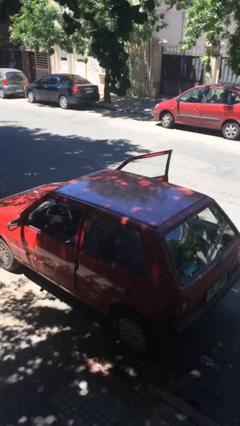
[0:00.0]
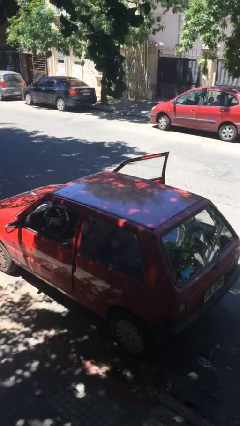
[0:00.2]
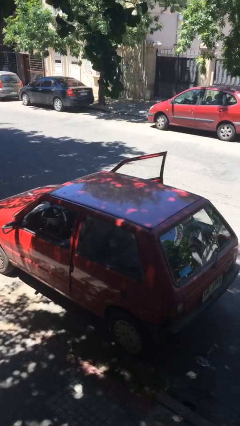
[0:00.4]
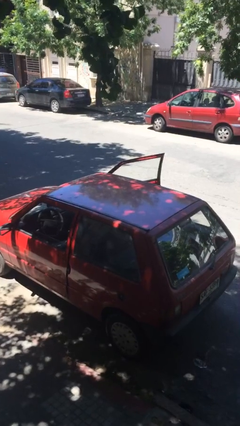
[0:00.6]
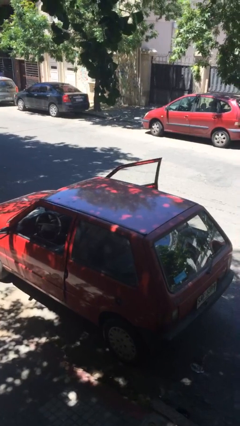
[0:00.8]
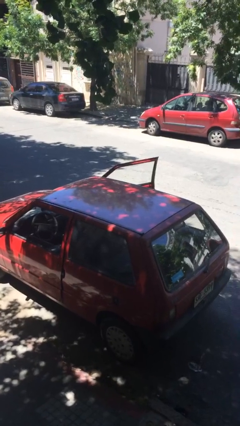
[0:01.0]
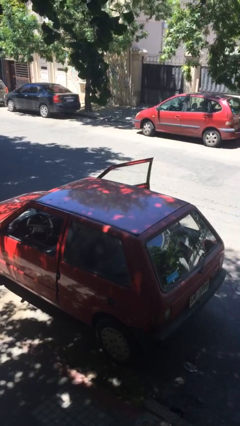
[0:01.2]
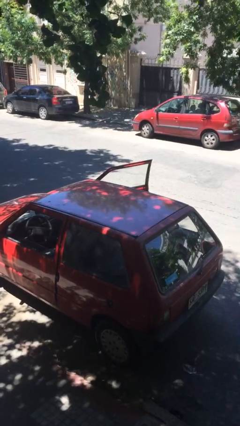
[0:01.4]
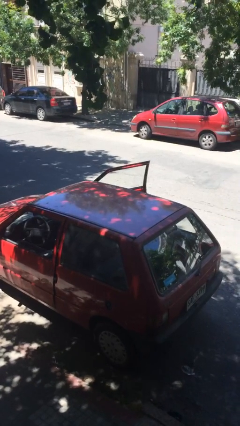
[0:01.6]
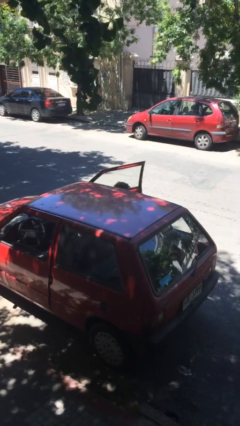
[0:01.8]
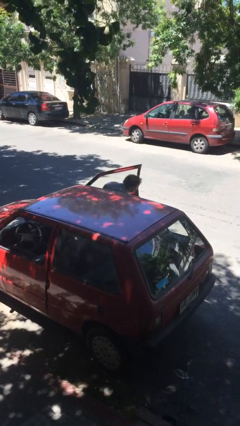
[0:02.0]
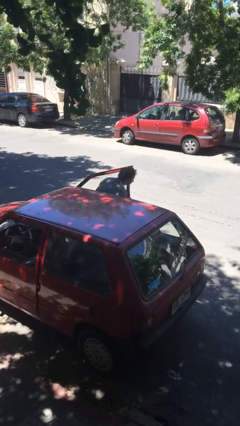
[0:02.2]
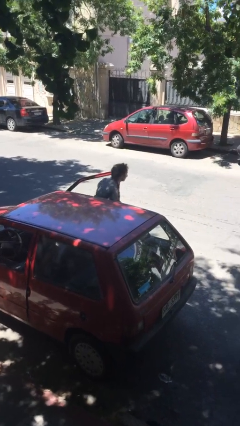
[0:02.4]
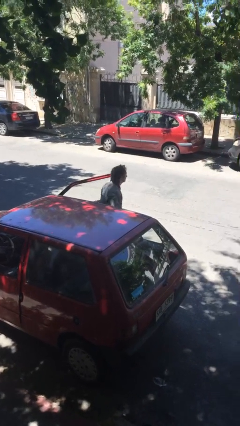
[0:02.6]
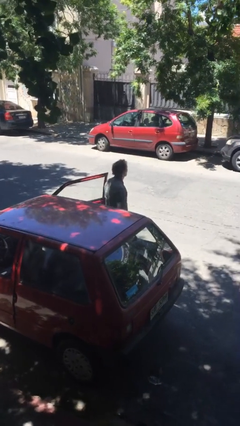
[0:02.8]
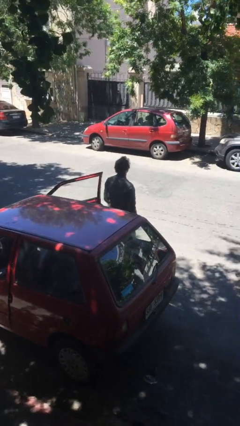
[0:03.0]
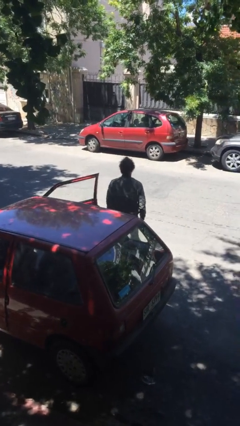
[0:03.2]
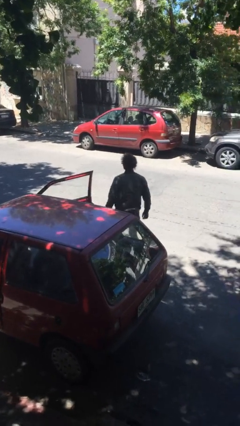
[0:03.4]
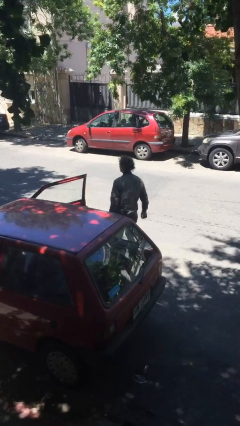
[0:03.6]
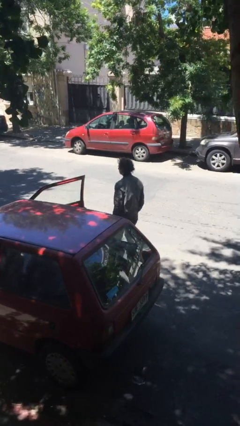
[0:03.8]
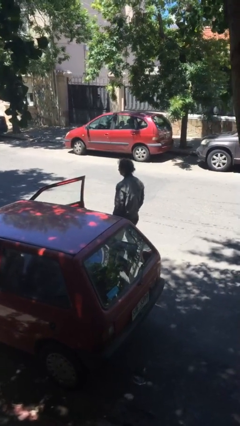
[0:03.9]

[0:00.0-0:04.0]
person exits car

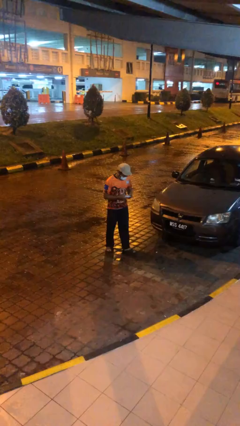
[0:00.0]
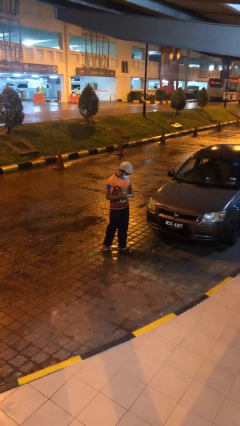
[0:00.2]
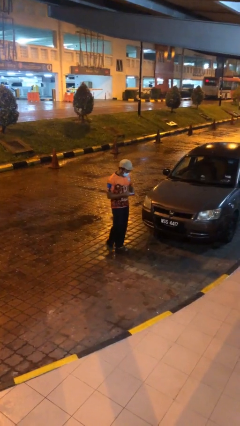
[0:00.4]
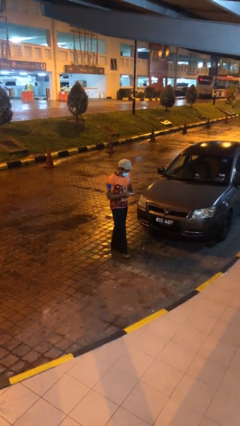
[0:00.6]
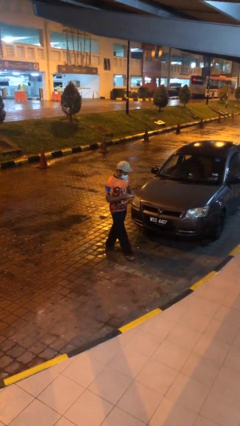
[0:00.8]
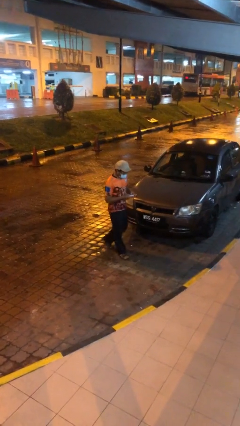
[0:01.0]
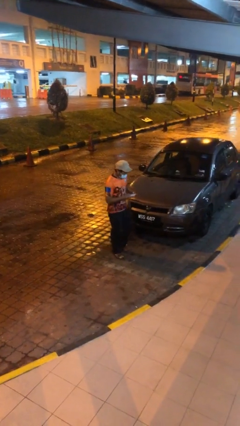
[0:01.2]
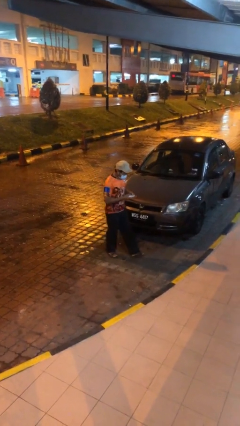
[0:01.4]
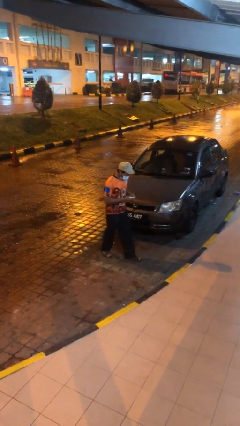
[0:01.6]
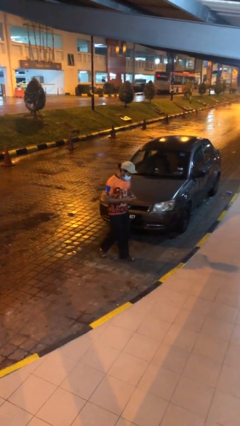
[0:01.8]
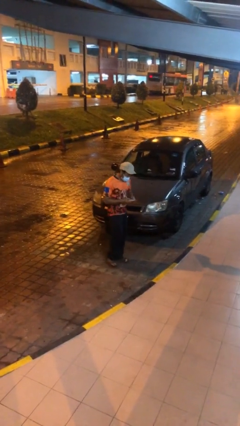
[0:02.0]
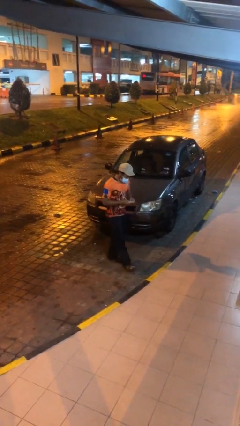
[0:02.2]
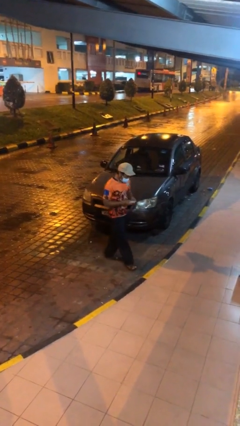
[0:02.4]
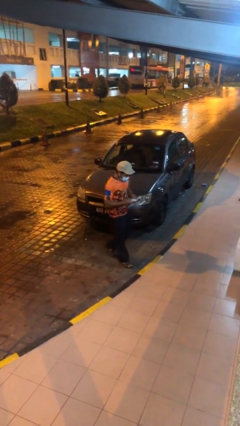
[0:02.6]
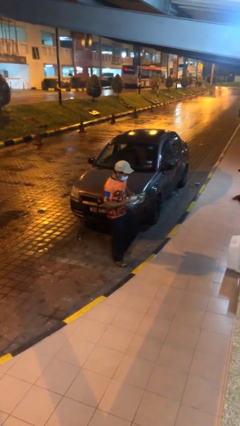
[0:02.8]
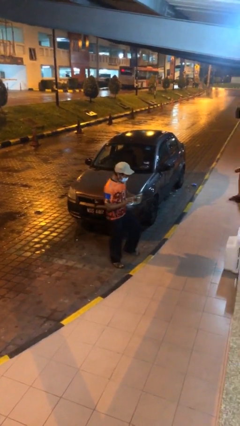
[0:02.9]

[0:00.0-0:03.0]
person texts on phone

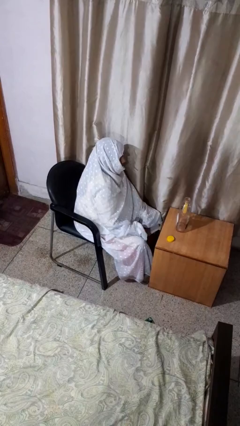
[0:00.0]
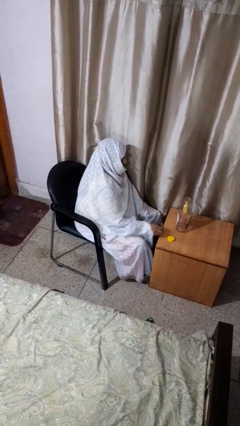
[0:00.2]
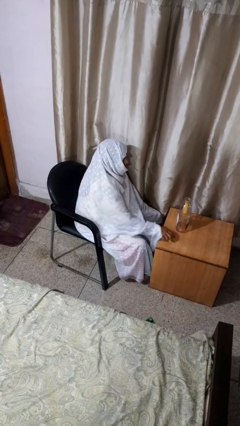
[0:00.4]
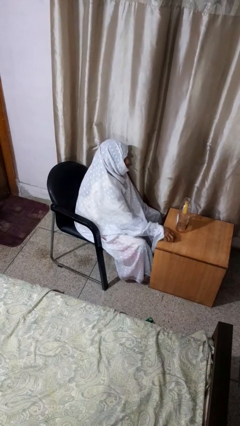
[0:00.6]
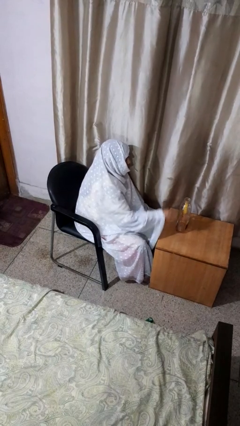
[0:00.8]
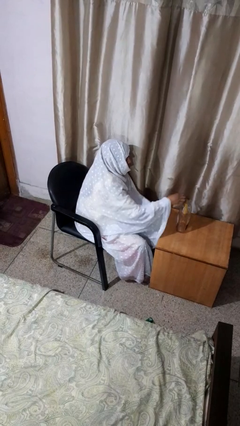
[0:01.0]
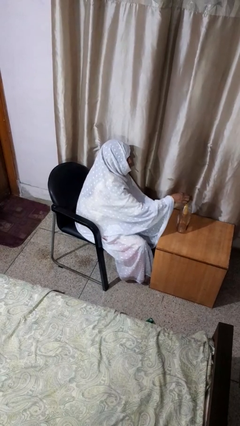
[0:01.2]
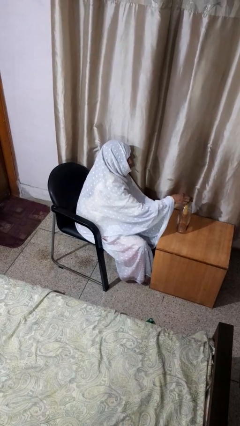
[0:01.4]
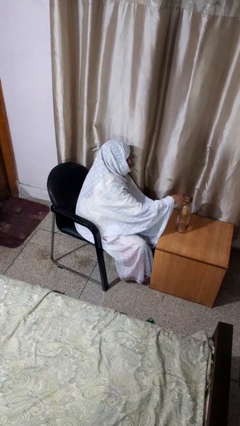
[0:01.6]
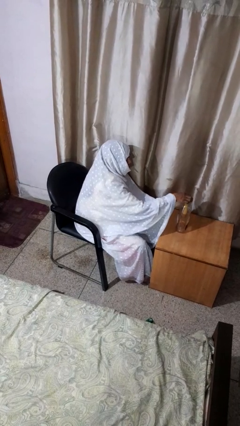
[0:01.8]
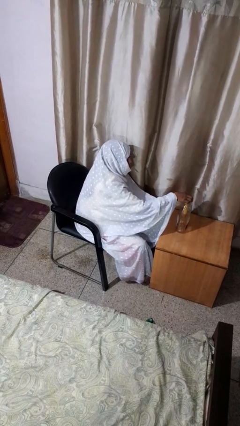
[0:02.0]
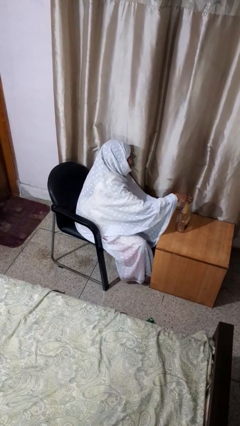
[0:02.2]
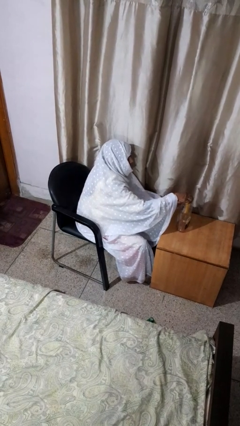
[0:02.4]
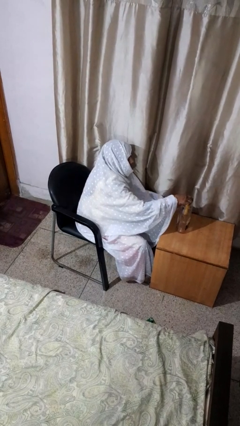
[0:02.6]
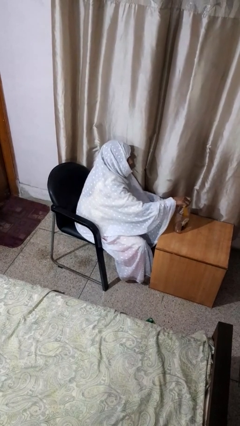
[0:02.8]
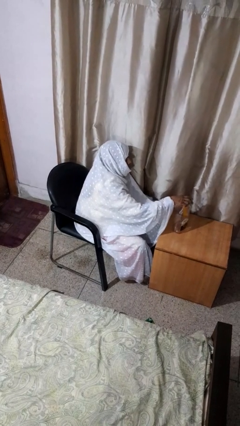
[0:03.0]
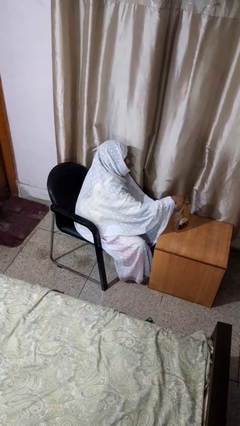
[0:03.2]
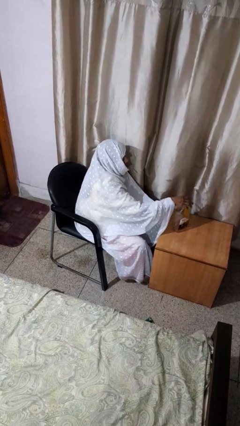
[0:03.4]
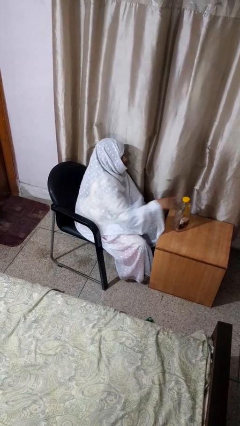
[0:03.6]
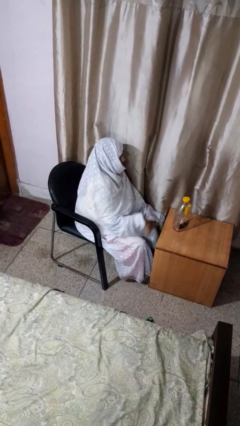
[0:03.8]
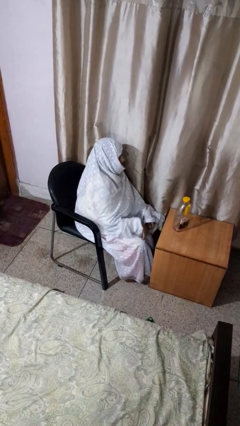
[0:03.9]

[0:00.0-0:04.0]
person screws lid to bottle

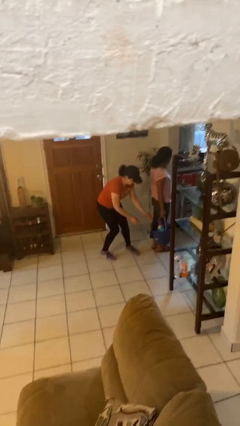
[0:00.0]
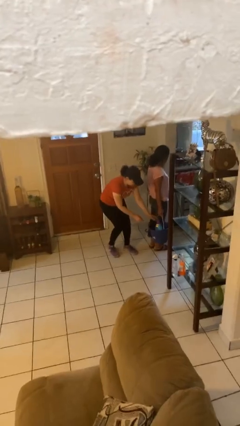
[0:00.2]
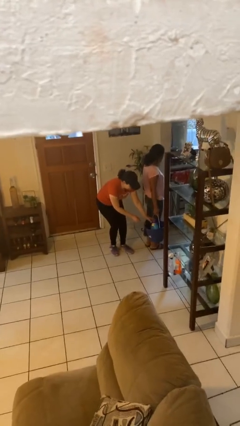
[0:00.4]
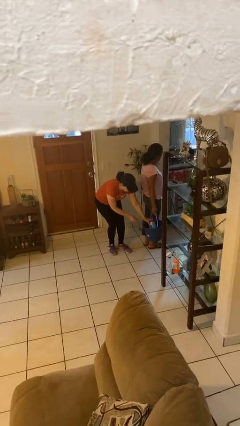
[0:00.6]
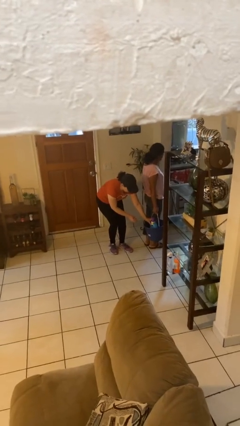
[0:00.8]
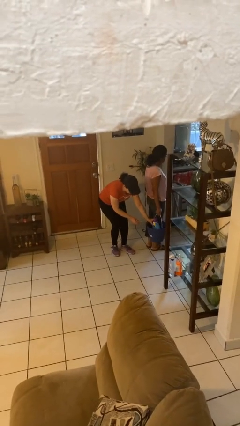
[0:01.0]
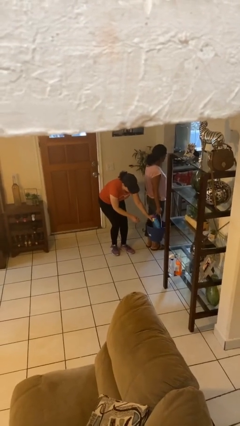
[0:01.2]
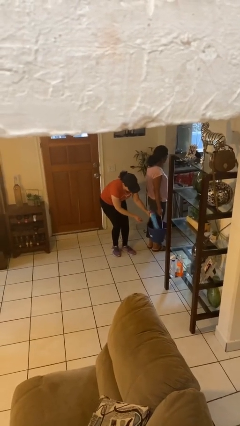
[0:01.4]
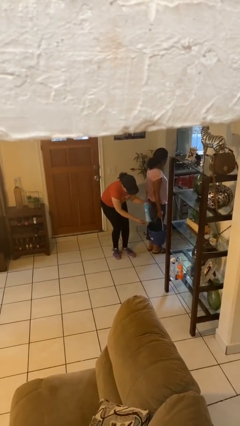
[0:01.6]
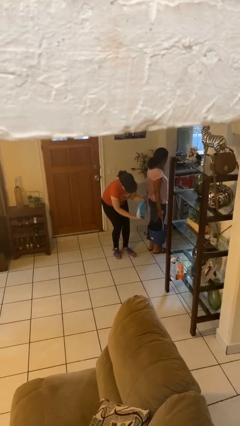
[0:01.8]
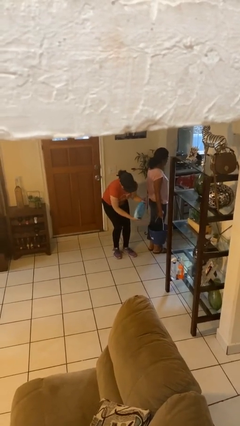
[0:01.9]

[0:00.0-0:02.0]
person steals object from person

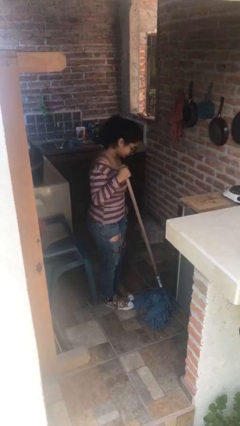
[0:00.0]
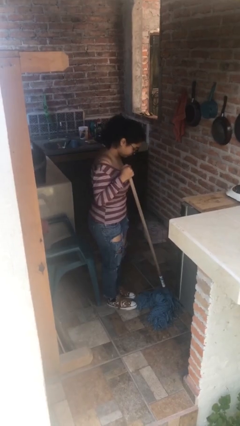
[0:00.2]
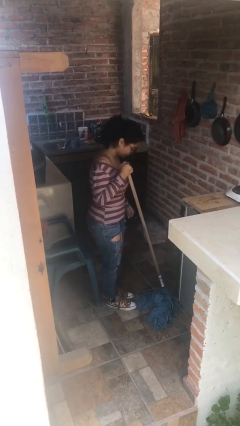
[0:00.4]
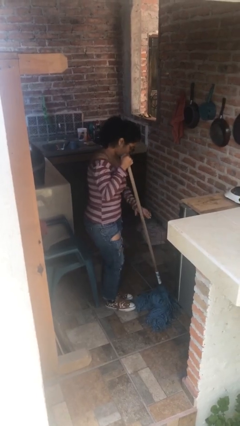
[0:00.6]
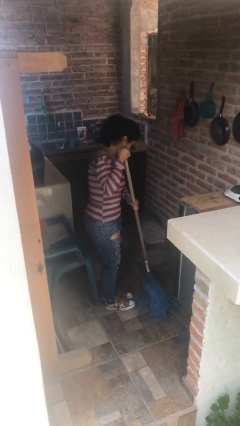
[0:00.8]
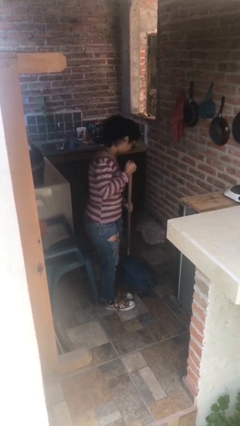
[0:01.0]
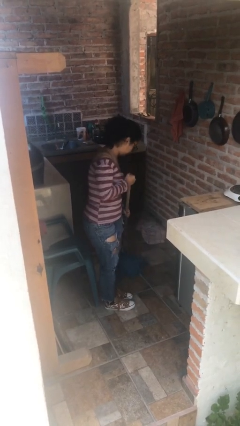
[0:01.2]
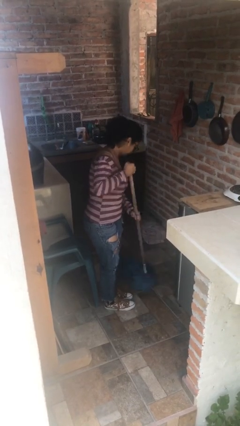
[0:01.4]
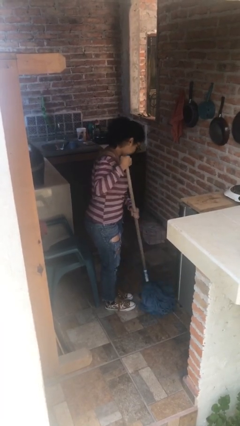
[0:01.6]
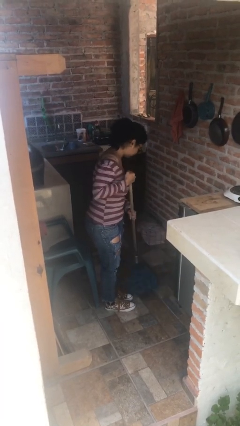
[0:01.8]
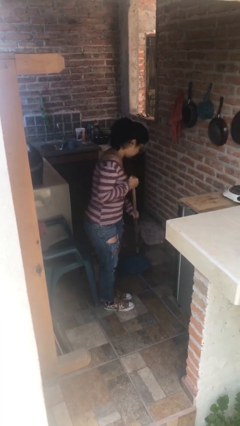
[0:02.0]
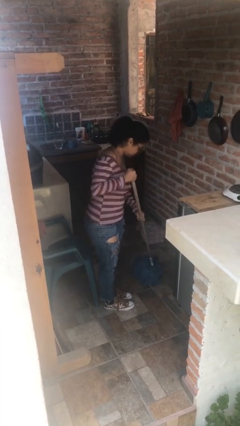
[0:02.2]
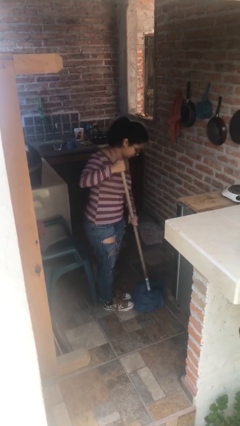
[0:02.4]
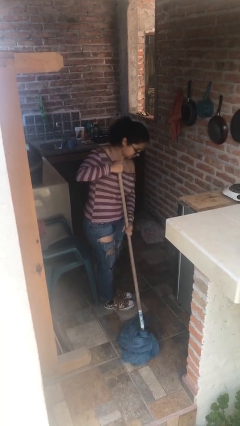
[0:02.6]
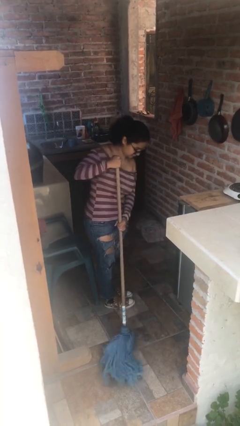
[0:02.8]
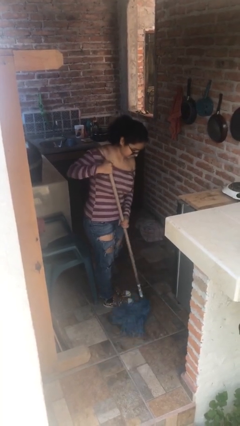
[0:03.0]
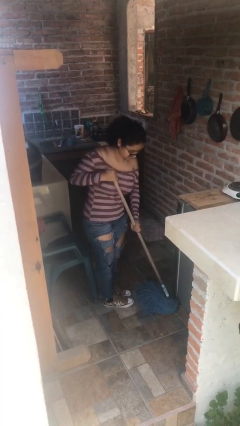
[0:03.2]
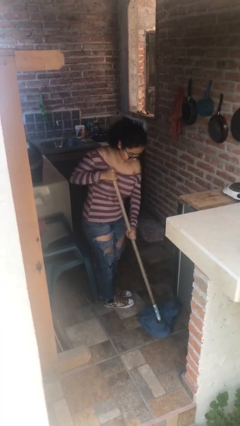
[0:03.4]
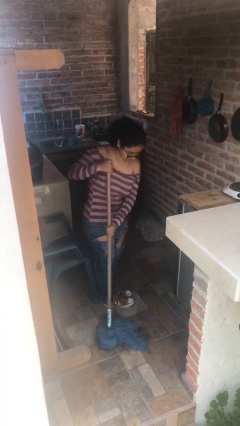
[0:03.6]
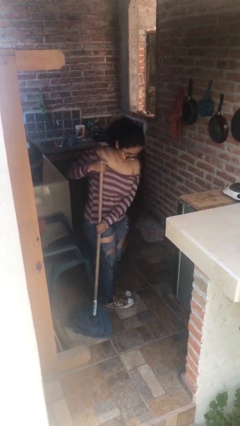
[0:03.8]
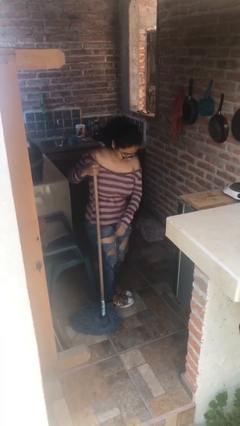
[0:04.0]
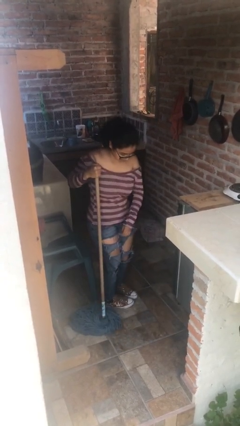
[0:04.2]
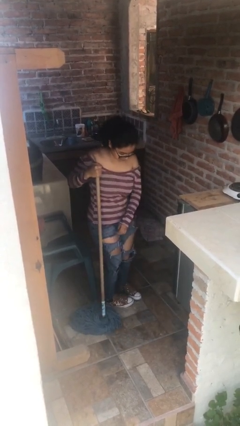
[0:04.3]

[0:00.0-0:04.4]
person mops

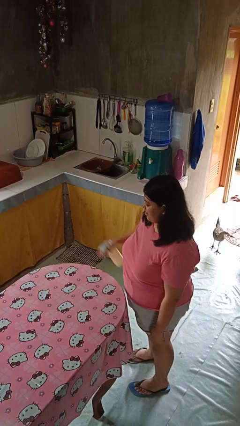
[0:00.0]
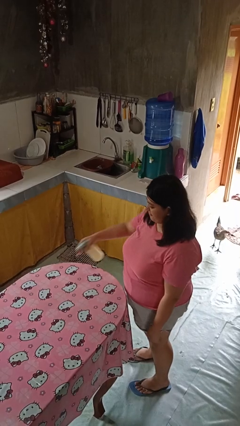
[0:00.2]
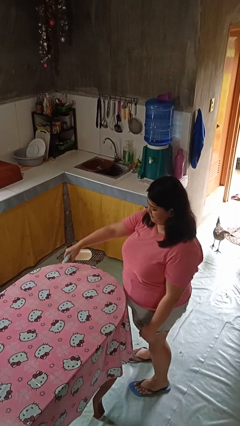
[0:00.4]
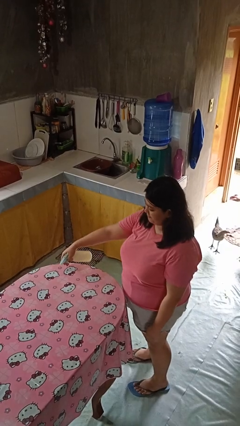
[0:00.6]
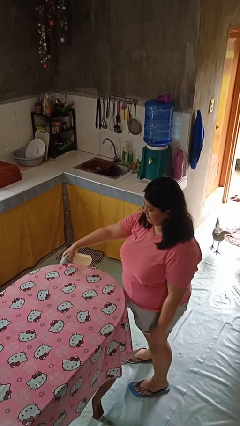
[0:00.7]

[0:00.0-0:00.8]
person sprays from bottle
